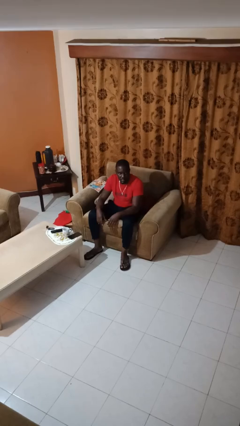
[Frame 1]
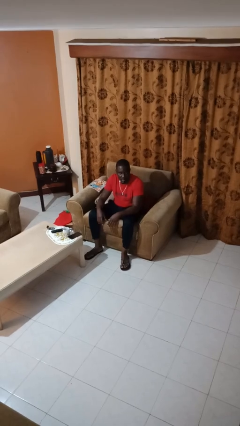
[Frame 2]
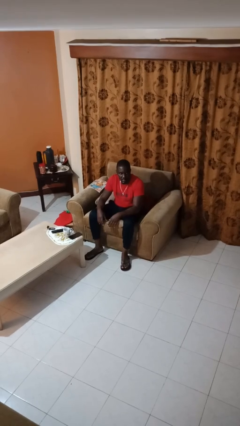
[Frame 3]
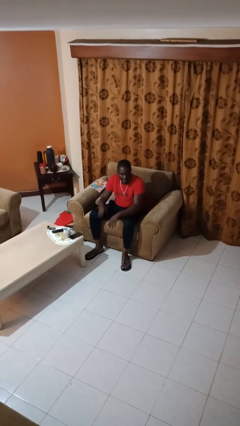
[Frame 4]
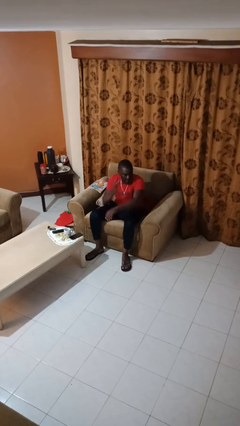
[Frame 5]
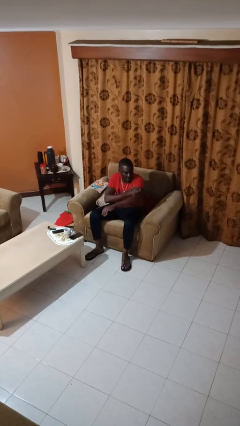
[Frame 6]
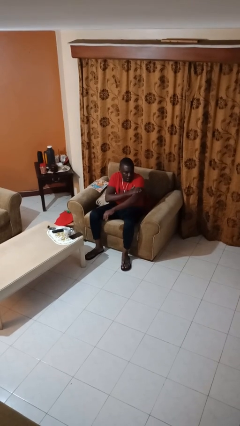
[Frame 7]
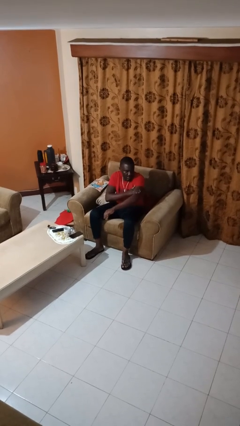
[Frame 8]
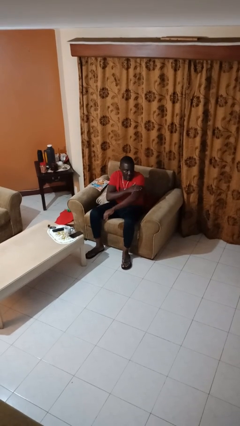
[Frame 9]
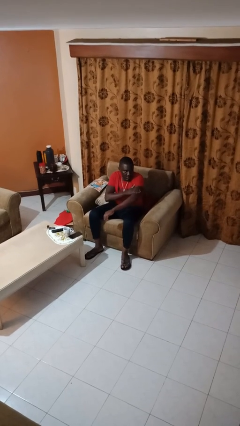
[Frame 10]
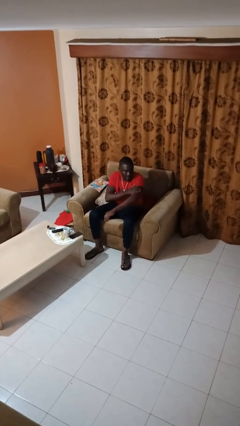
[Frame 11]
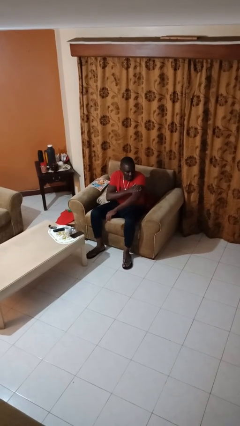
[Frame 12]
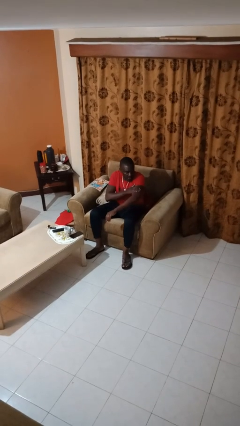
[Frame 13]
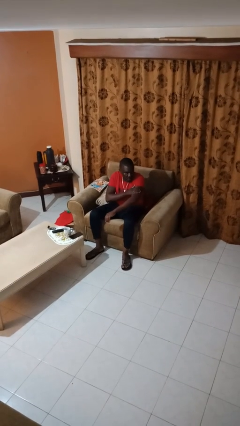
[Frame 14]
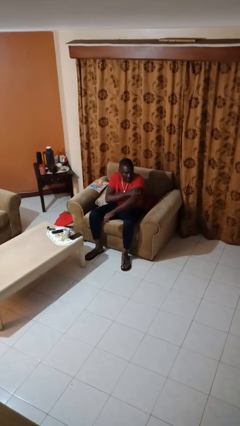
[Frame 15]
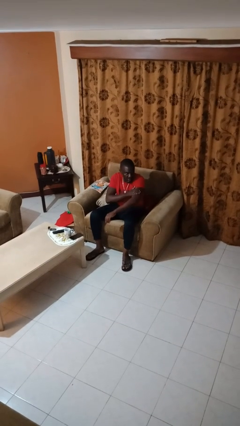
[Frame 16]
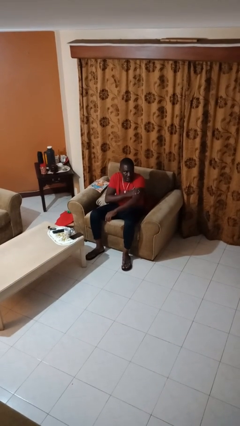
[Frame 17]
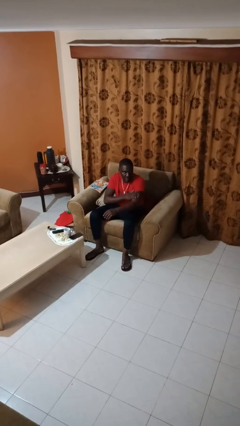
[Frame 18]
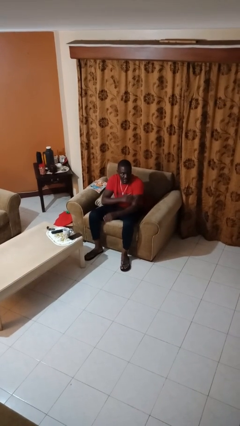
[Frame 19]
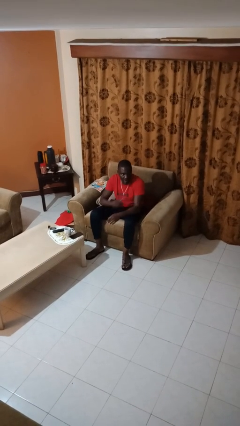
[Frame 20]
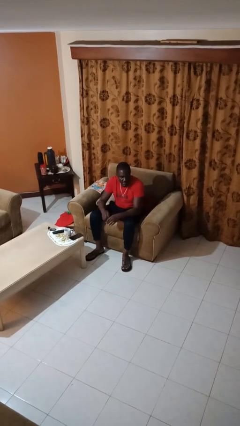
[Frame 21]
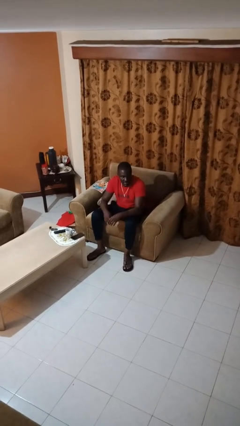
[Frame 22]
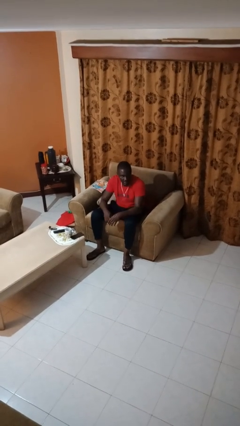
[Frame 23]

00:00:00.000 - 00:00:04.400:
person swats bug

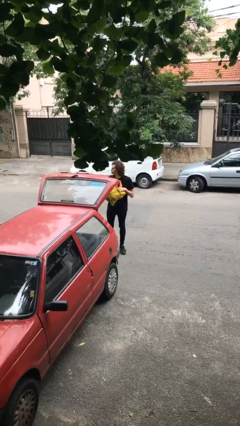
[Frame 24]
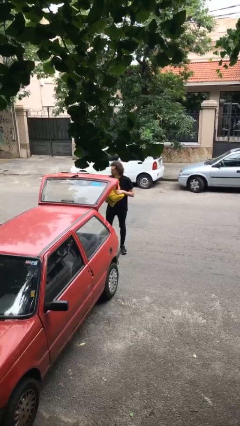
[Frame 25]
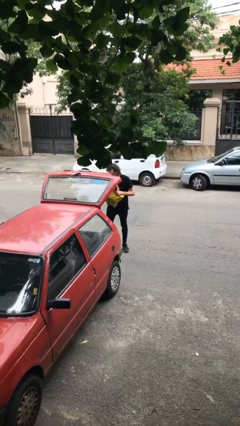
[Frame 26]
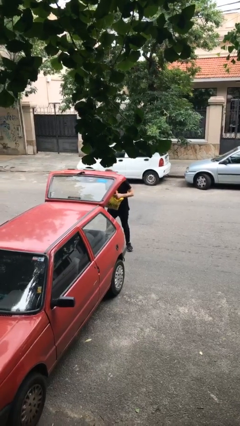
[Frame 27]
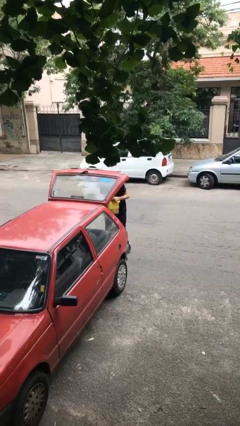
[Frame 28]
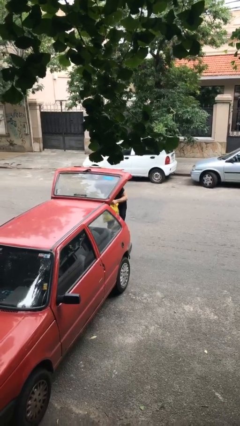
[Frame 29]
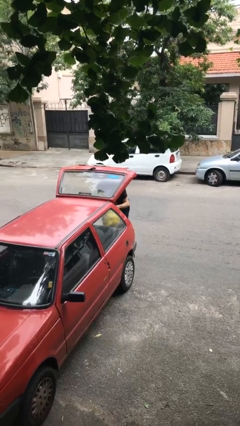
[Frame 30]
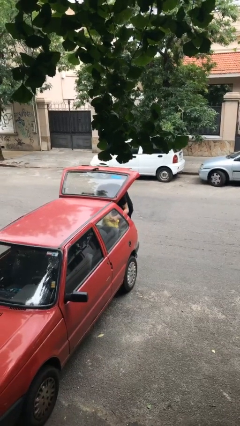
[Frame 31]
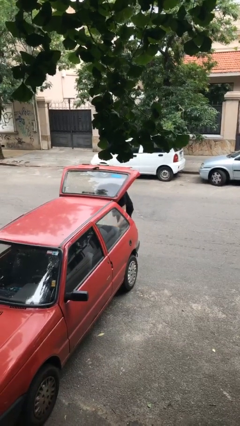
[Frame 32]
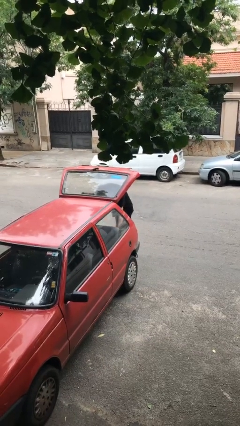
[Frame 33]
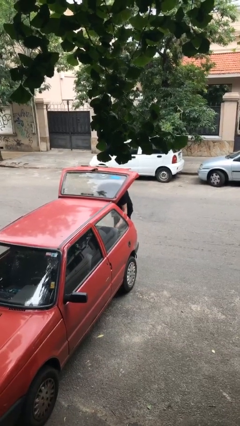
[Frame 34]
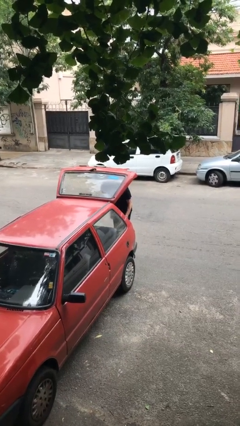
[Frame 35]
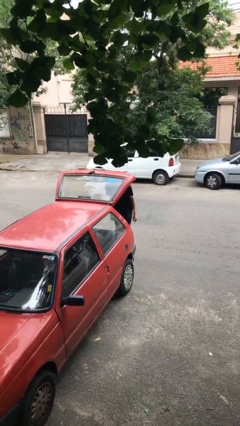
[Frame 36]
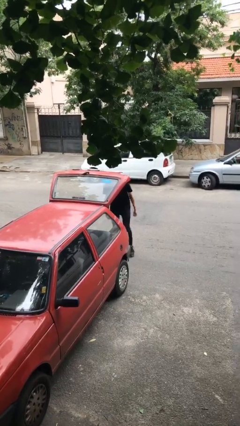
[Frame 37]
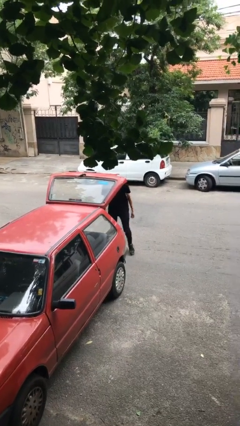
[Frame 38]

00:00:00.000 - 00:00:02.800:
person loads car

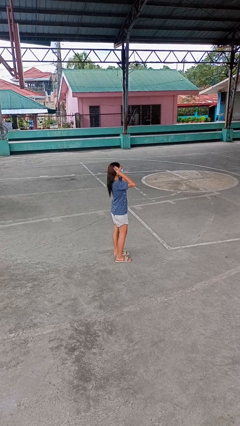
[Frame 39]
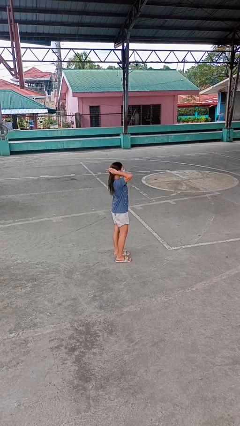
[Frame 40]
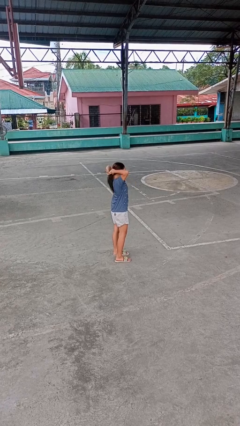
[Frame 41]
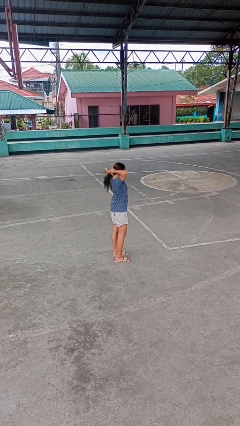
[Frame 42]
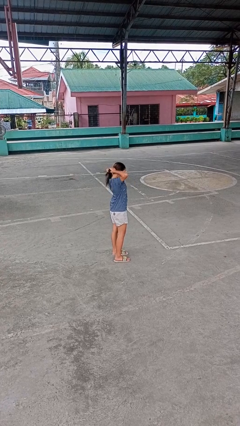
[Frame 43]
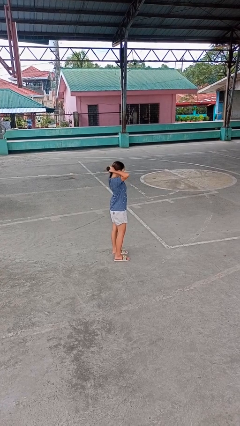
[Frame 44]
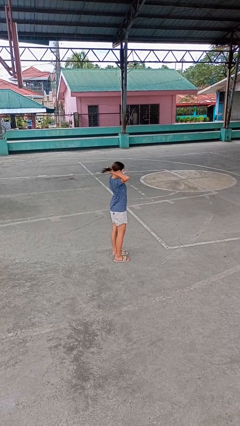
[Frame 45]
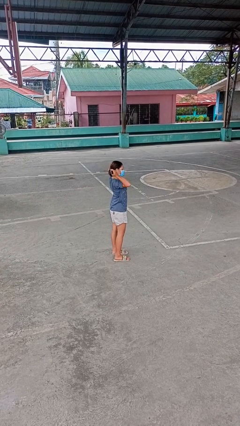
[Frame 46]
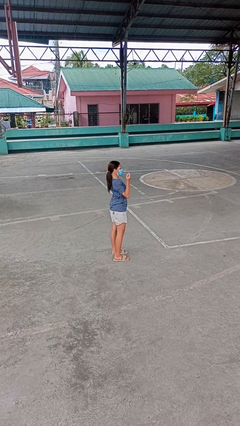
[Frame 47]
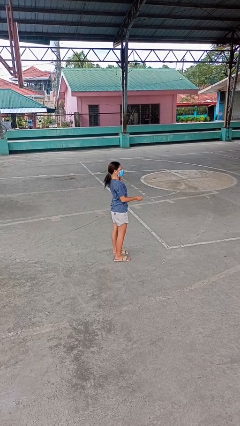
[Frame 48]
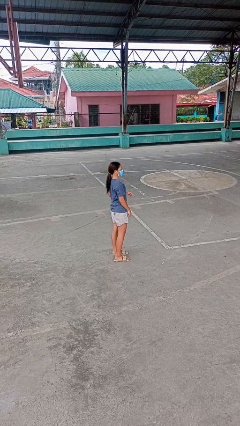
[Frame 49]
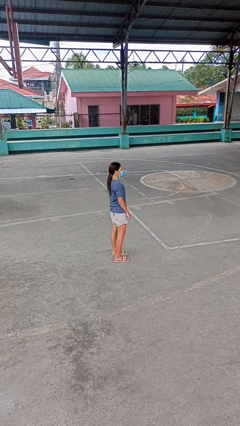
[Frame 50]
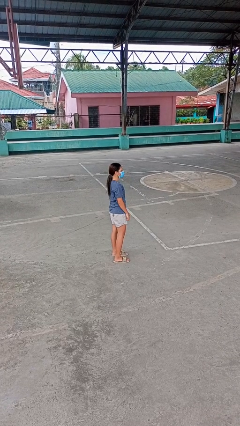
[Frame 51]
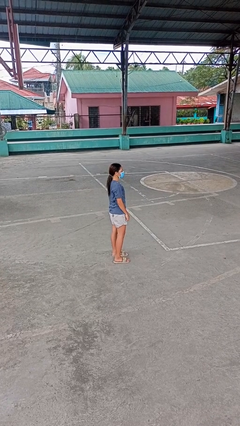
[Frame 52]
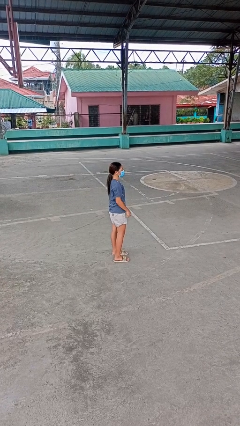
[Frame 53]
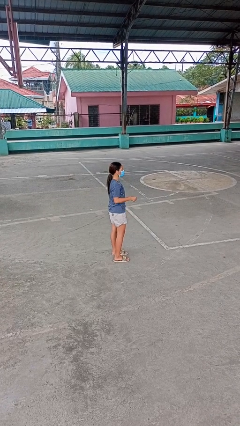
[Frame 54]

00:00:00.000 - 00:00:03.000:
person puts hair in ponytail

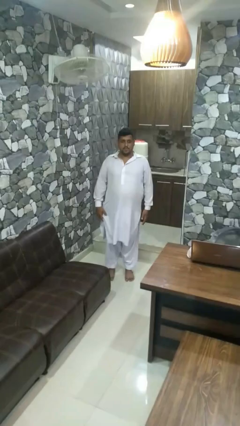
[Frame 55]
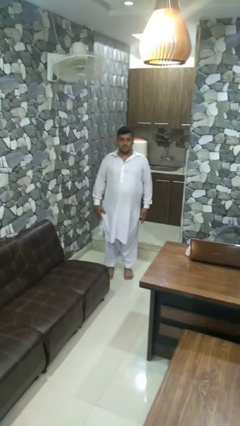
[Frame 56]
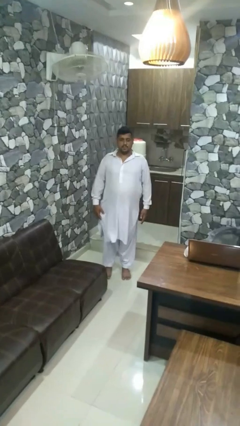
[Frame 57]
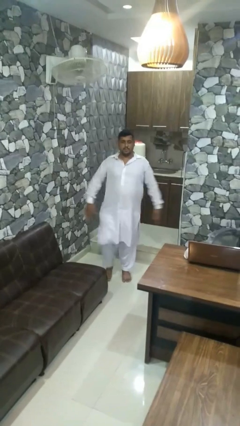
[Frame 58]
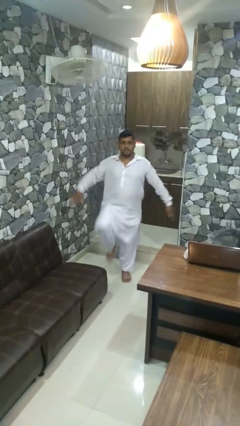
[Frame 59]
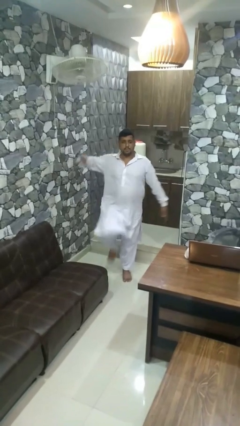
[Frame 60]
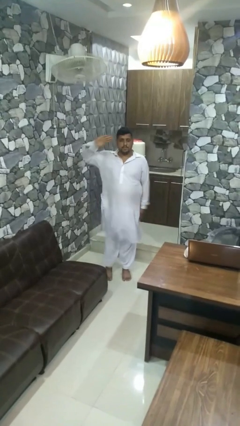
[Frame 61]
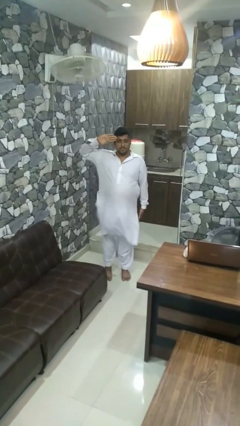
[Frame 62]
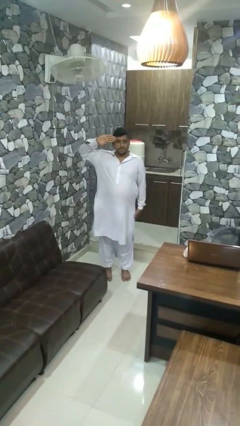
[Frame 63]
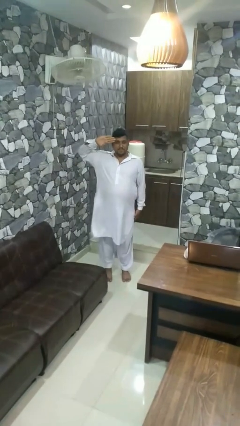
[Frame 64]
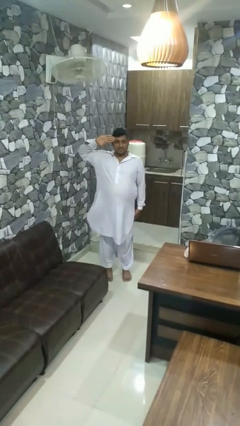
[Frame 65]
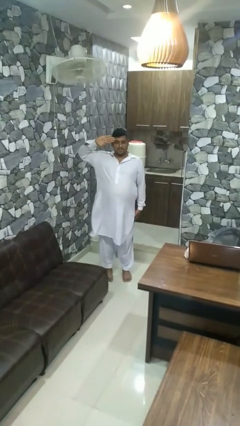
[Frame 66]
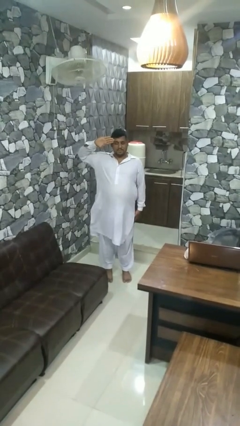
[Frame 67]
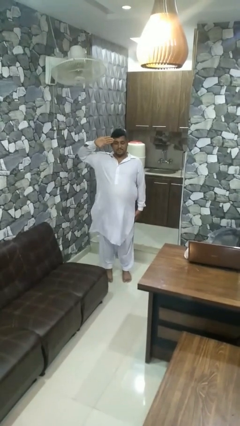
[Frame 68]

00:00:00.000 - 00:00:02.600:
person salutes

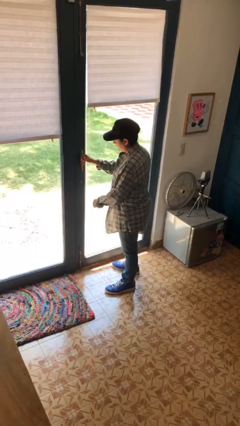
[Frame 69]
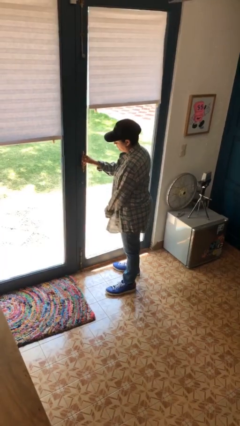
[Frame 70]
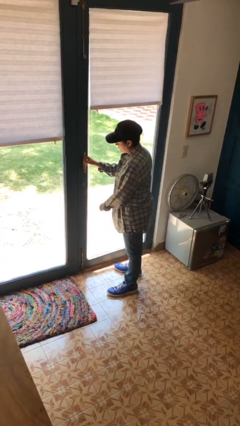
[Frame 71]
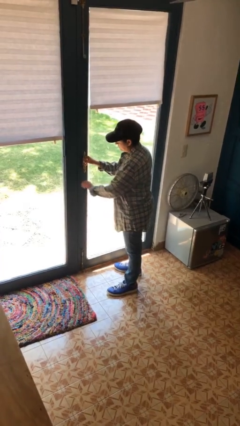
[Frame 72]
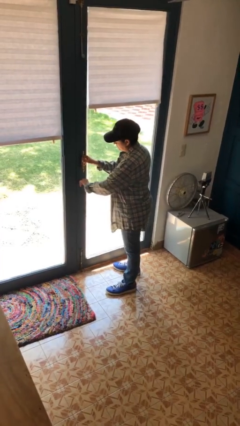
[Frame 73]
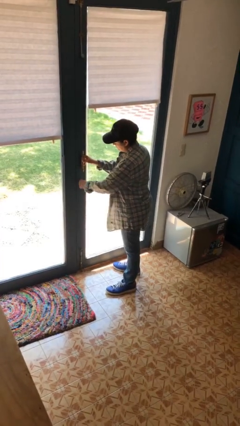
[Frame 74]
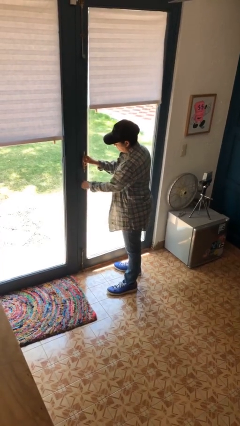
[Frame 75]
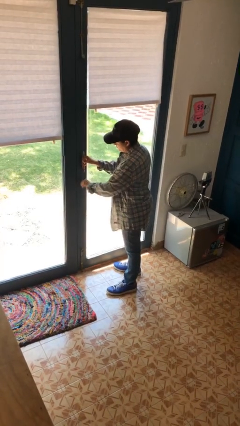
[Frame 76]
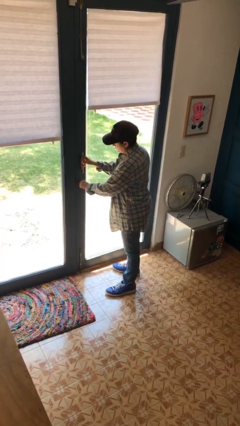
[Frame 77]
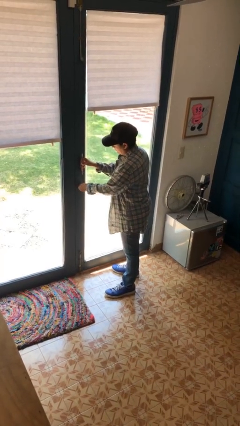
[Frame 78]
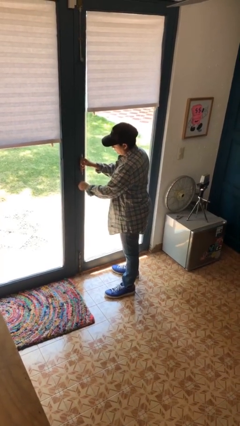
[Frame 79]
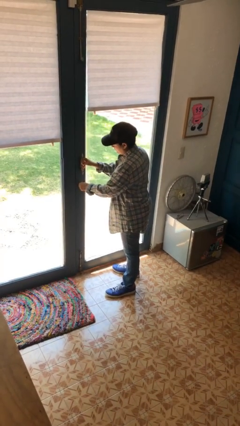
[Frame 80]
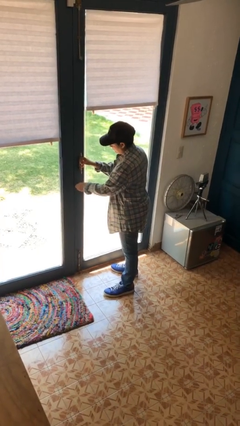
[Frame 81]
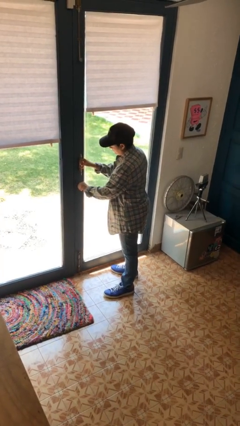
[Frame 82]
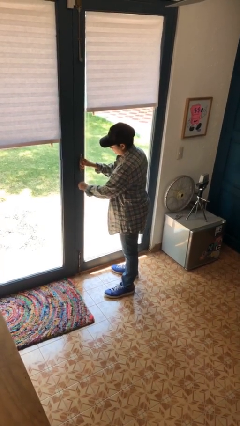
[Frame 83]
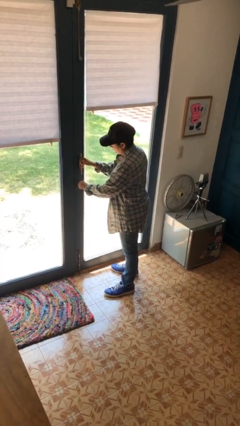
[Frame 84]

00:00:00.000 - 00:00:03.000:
person locks door with keys

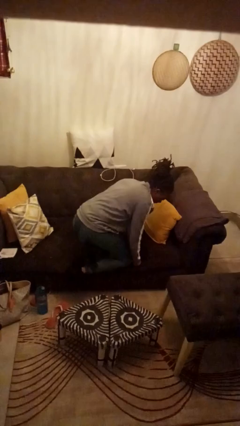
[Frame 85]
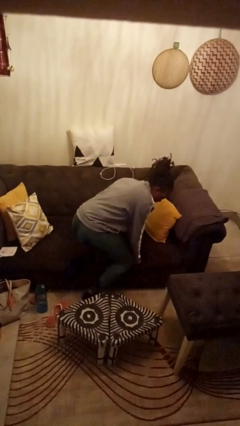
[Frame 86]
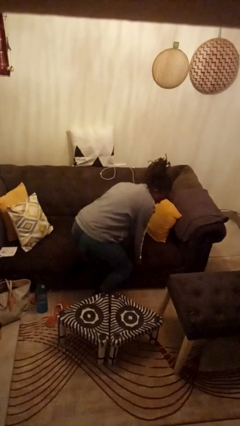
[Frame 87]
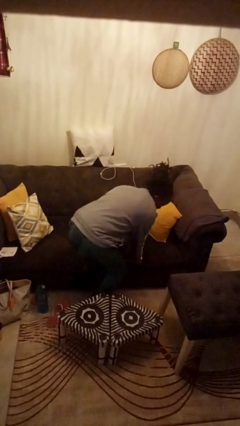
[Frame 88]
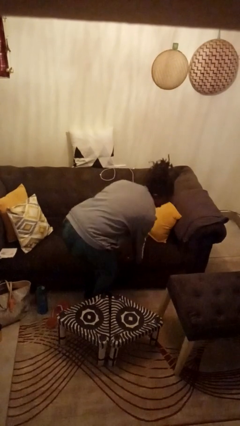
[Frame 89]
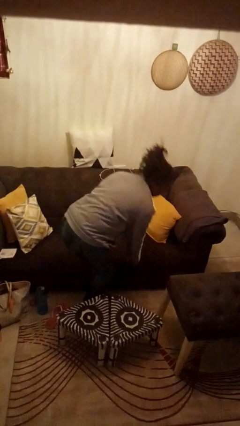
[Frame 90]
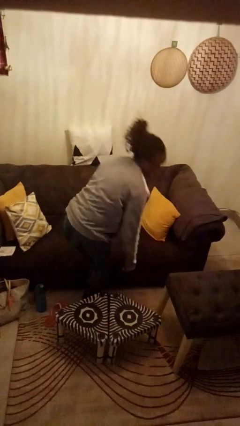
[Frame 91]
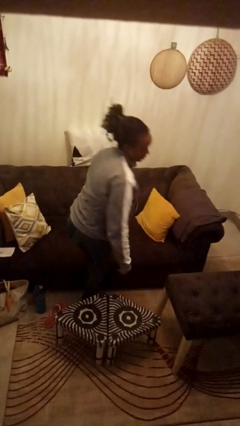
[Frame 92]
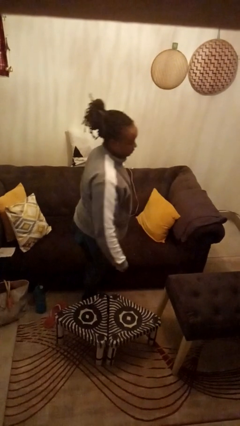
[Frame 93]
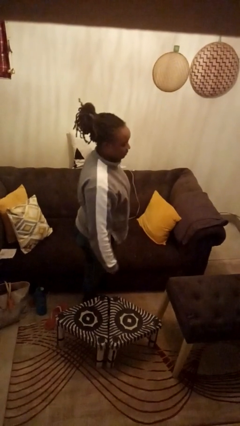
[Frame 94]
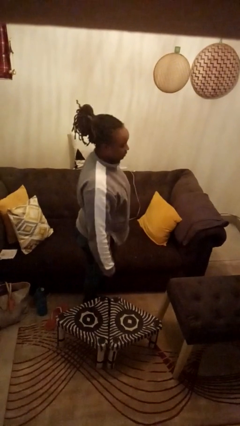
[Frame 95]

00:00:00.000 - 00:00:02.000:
person climbs off couch
